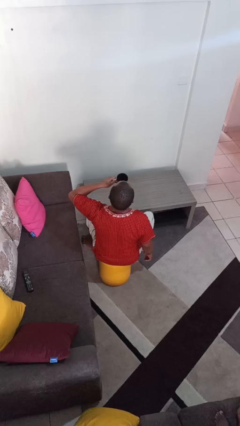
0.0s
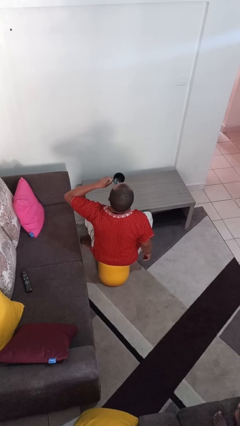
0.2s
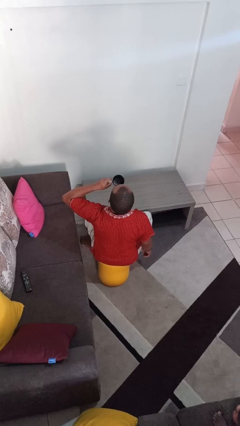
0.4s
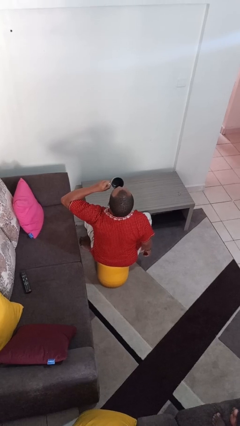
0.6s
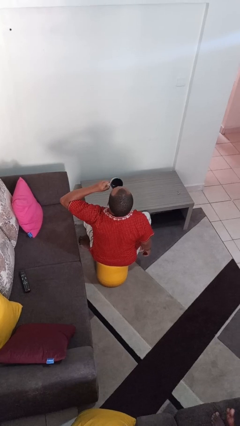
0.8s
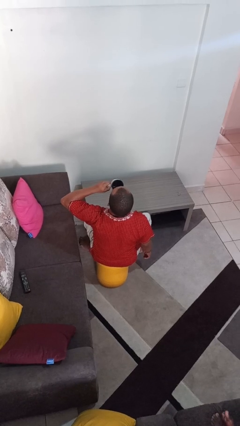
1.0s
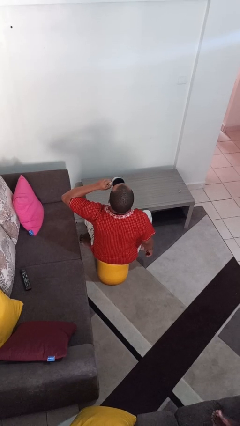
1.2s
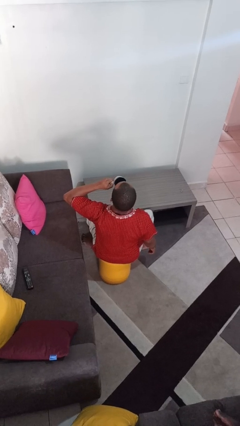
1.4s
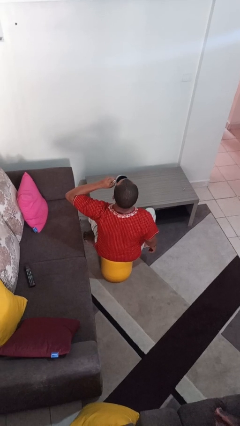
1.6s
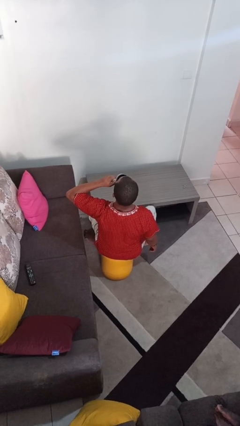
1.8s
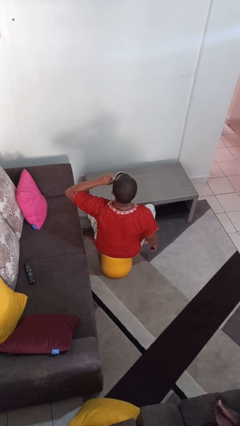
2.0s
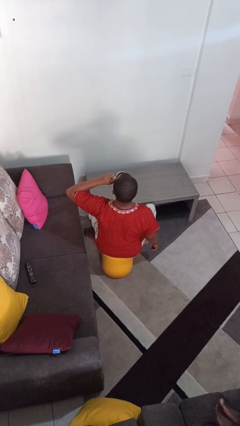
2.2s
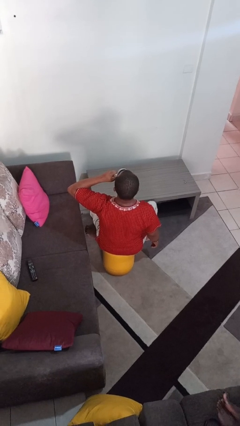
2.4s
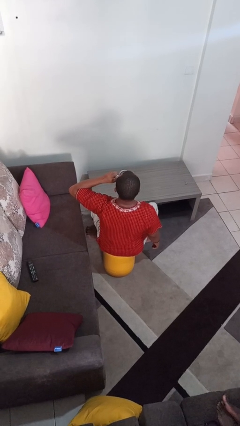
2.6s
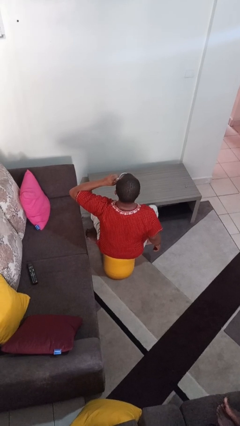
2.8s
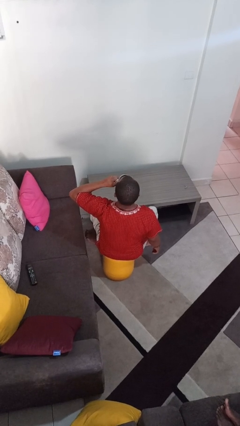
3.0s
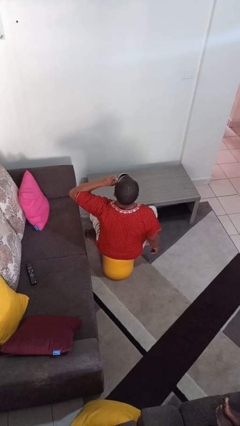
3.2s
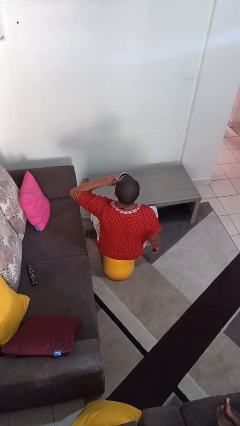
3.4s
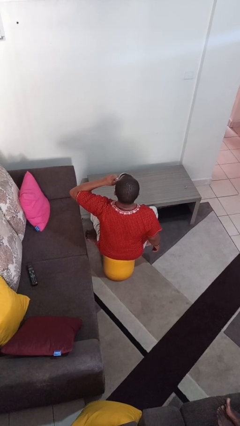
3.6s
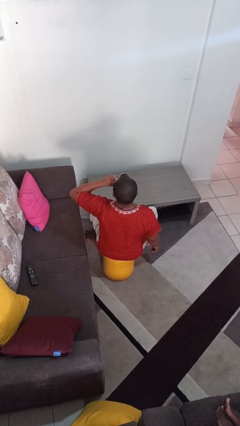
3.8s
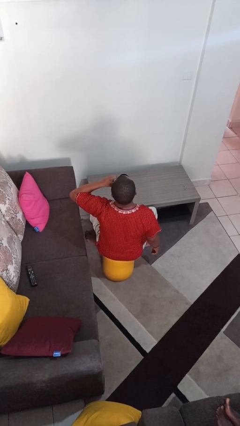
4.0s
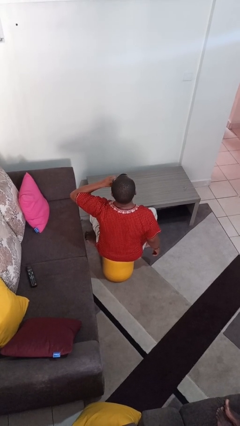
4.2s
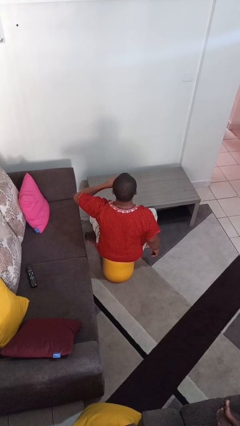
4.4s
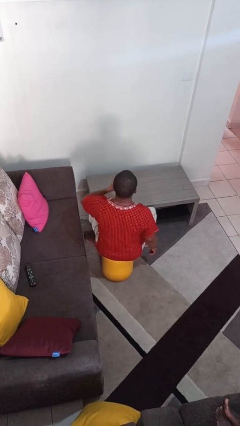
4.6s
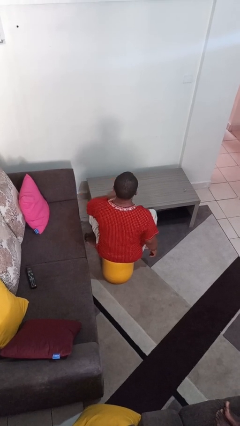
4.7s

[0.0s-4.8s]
person drinks from mug

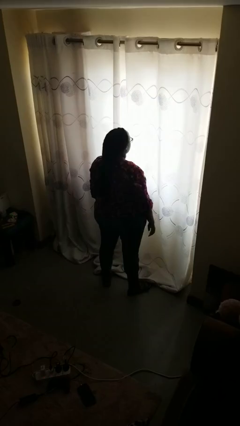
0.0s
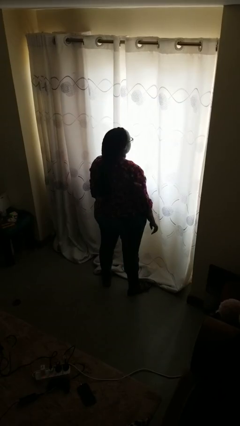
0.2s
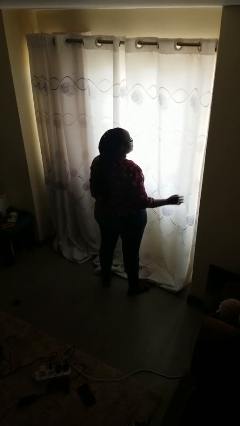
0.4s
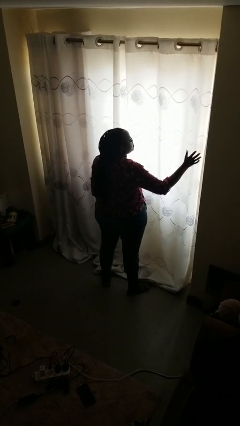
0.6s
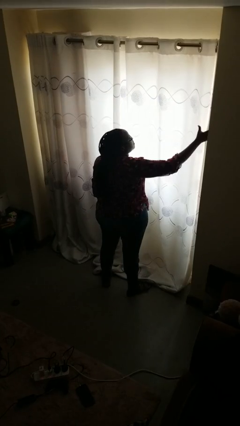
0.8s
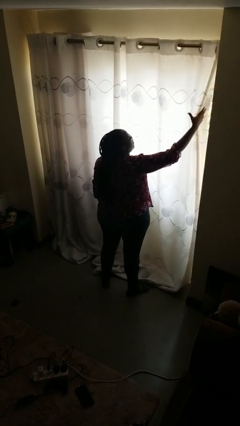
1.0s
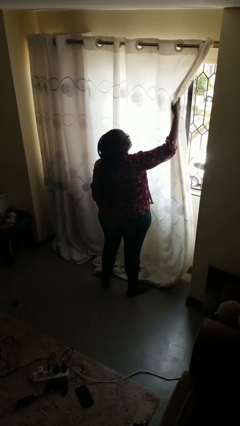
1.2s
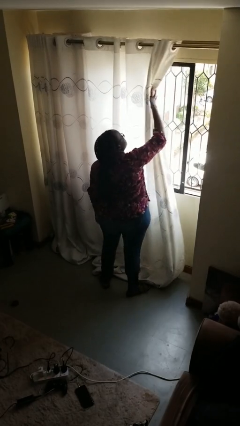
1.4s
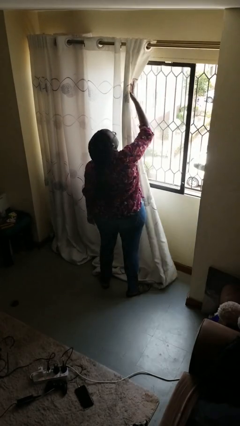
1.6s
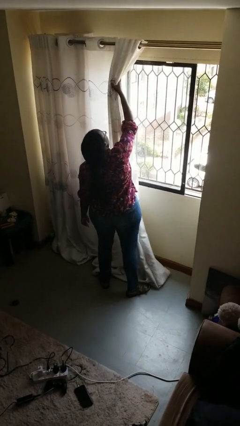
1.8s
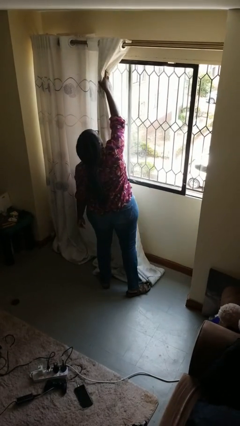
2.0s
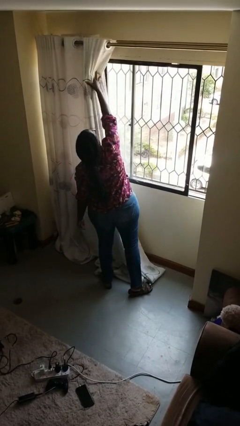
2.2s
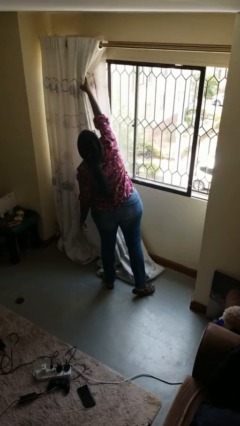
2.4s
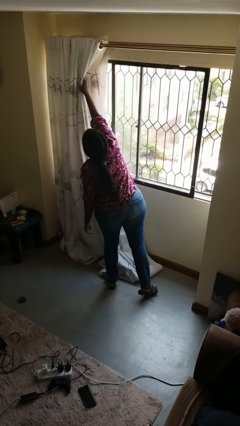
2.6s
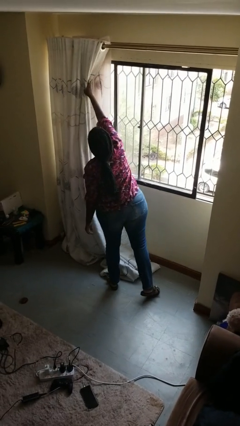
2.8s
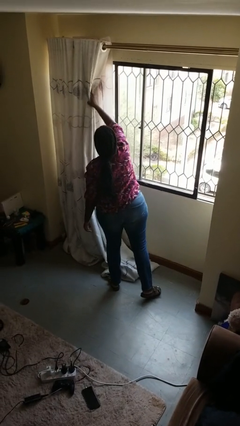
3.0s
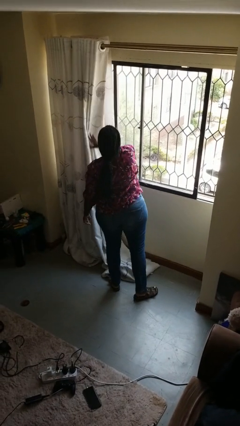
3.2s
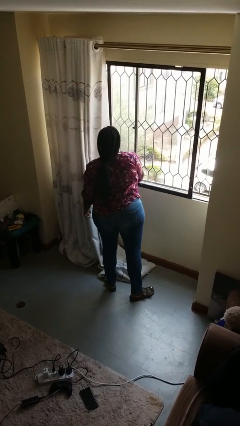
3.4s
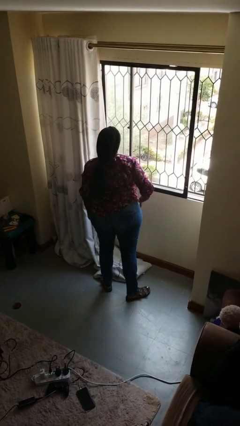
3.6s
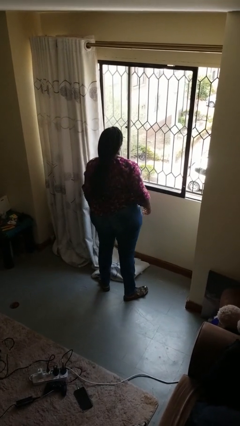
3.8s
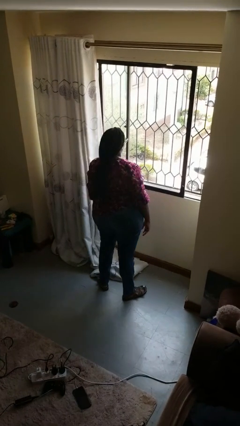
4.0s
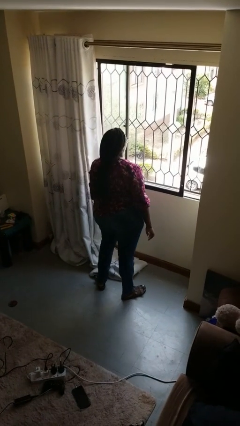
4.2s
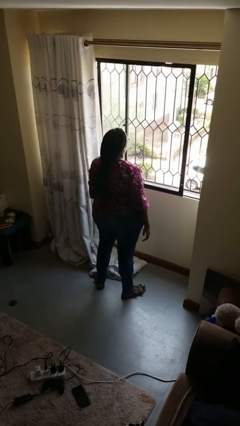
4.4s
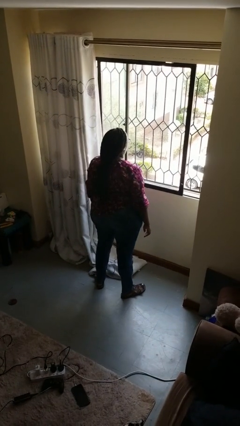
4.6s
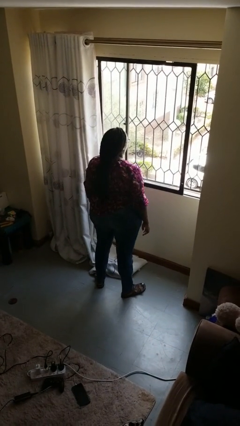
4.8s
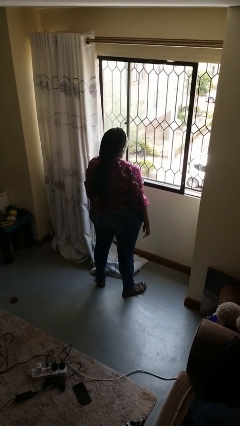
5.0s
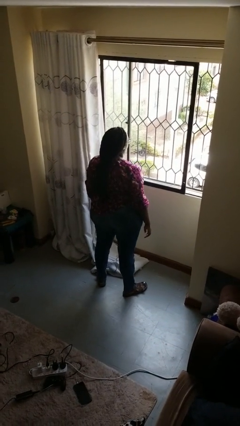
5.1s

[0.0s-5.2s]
person opens curtains

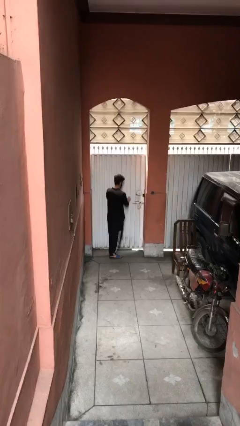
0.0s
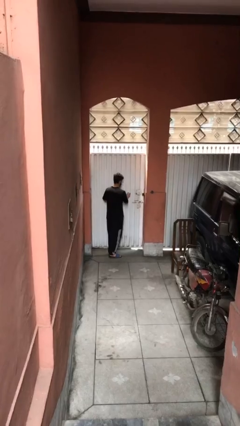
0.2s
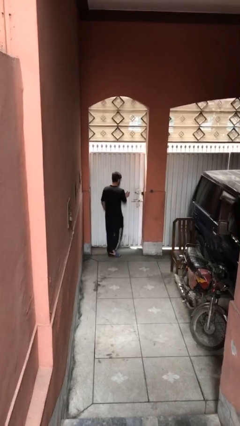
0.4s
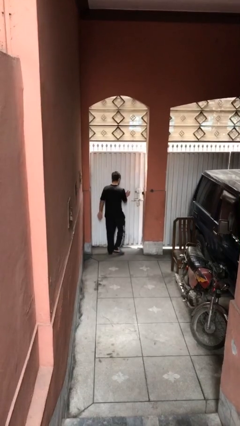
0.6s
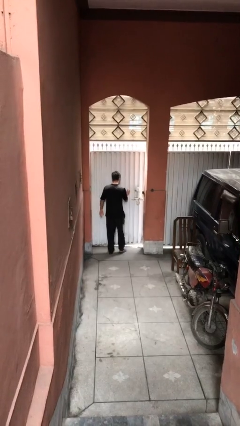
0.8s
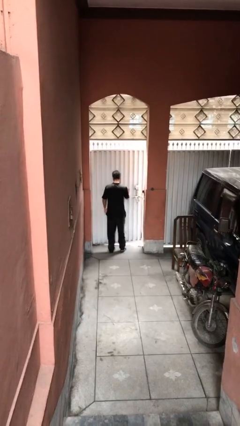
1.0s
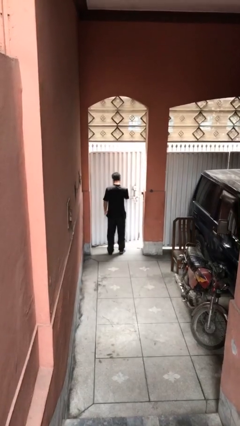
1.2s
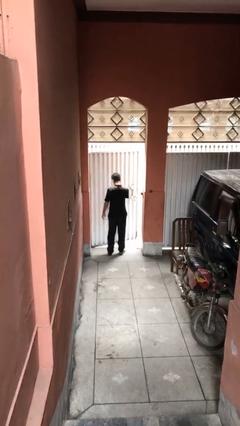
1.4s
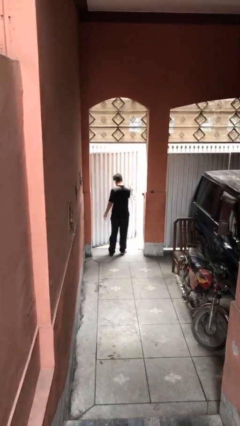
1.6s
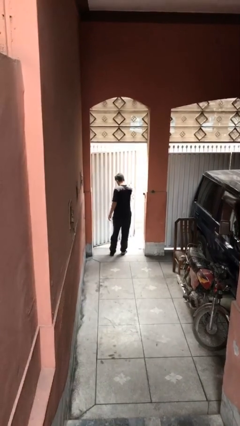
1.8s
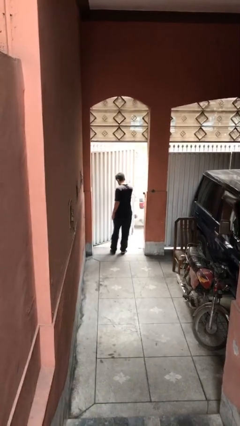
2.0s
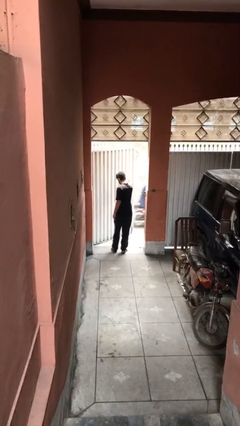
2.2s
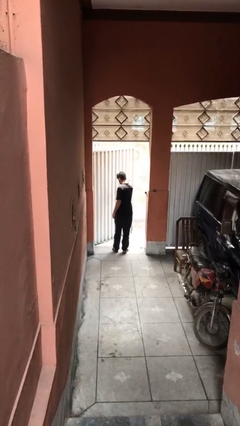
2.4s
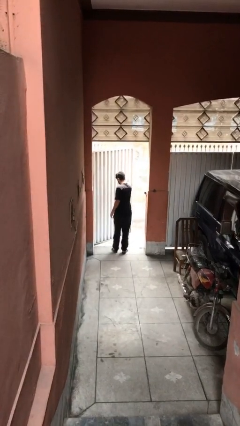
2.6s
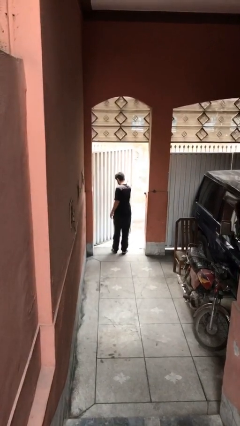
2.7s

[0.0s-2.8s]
person opens facility door

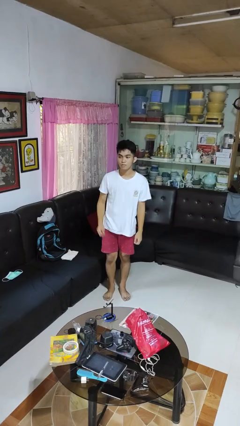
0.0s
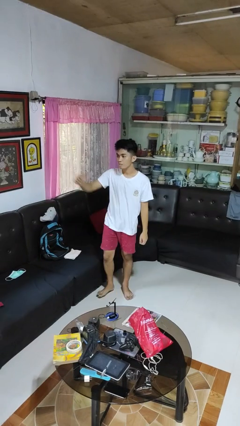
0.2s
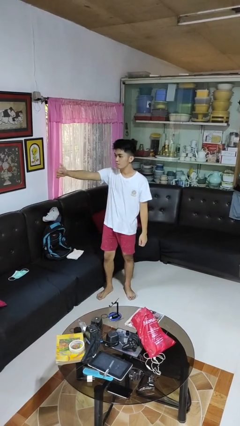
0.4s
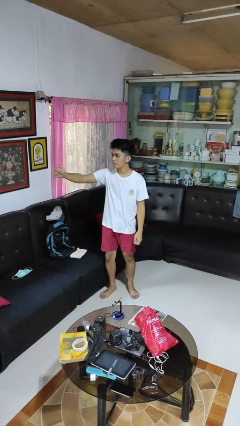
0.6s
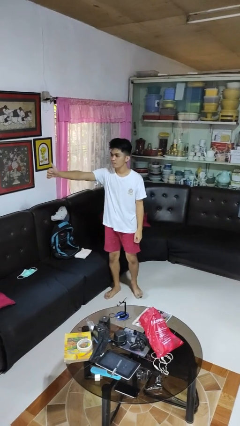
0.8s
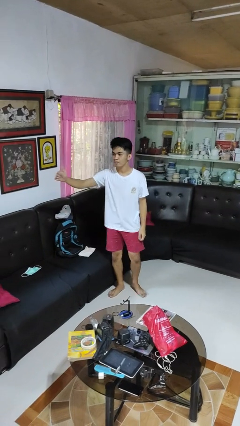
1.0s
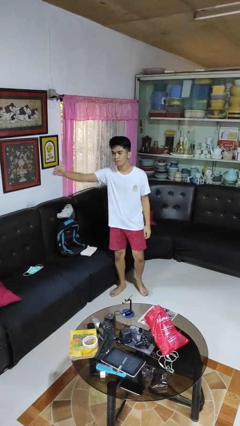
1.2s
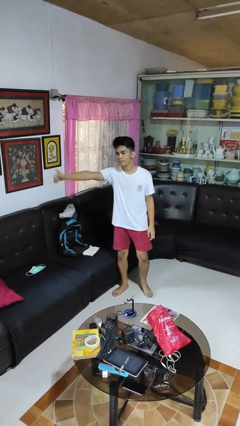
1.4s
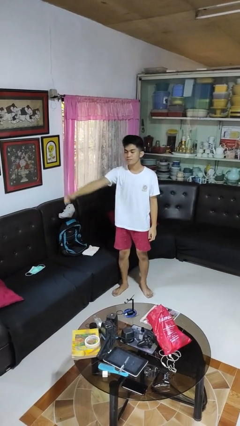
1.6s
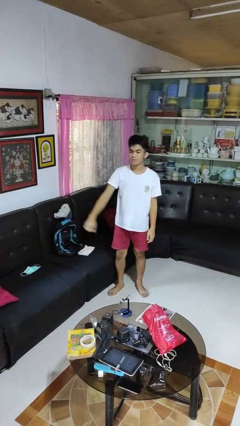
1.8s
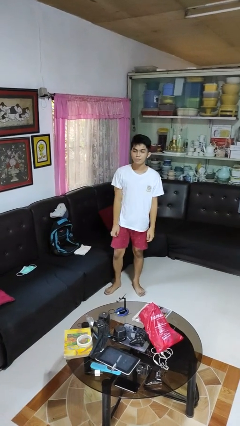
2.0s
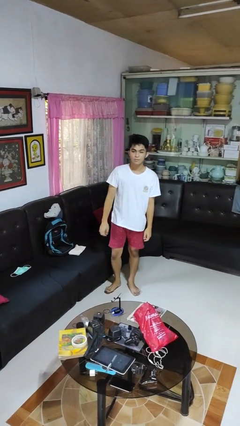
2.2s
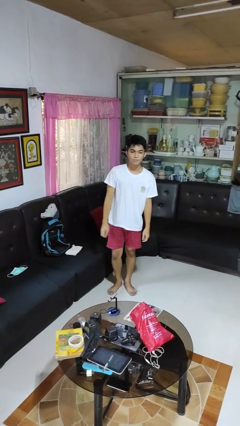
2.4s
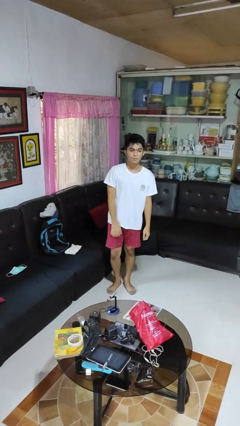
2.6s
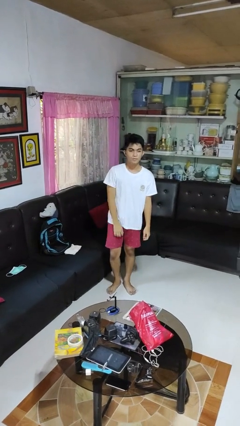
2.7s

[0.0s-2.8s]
person gestures thumbs up

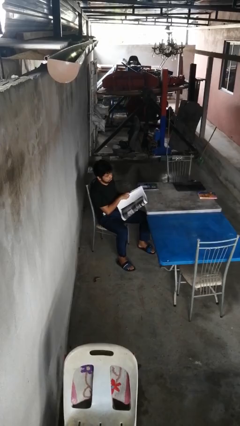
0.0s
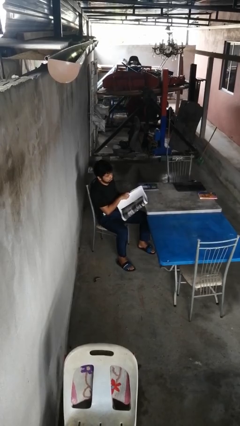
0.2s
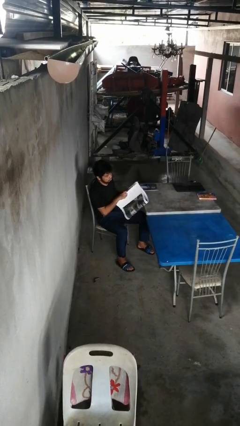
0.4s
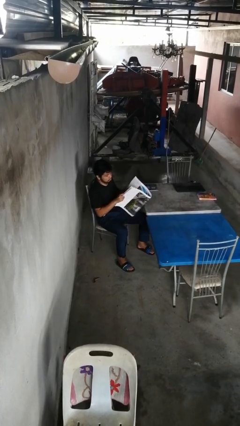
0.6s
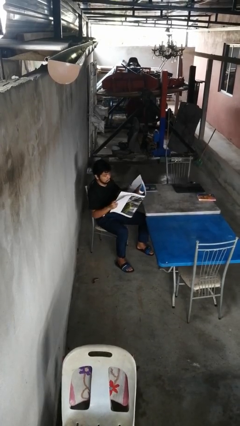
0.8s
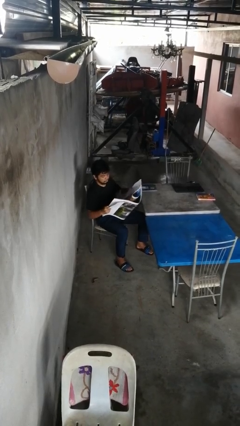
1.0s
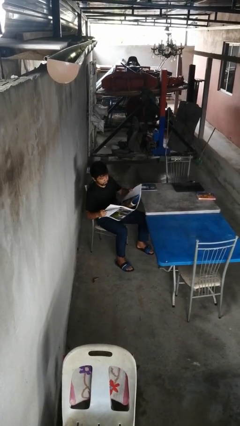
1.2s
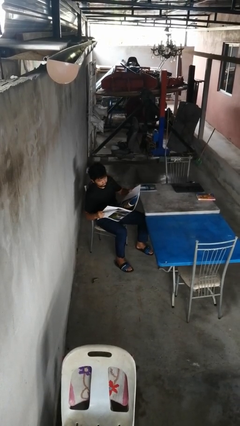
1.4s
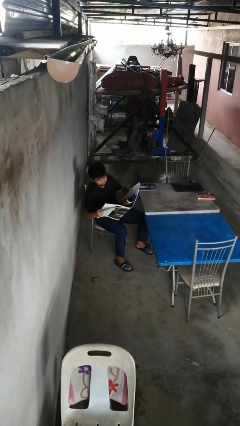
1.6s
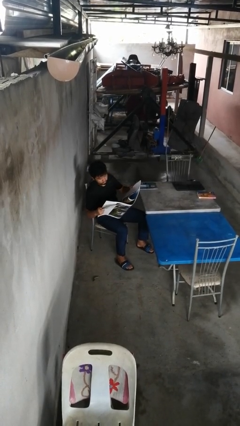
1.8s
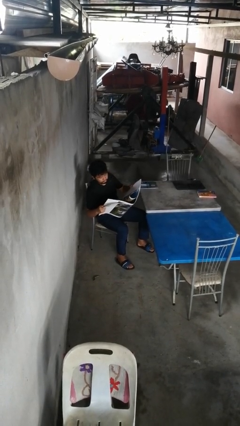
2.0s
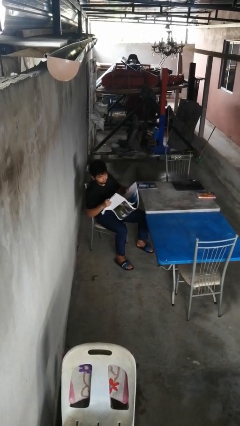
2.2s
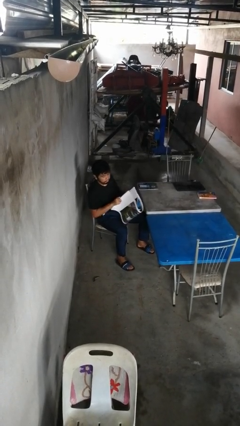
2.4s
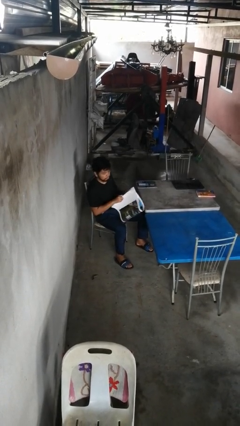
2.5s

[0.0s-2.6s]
person reads newspaper
